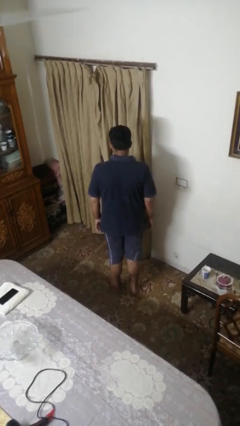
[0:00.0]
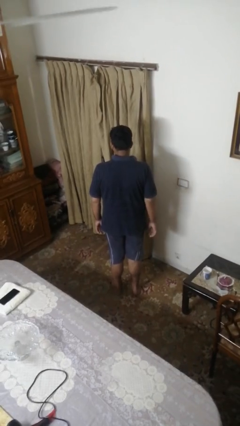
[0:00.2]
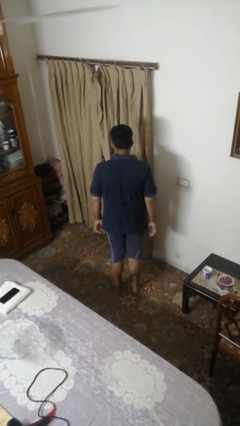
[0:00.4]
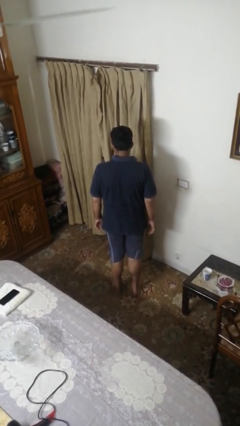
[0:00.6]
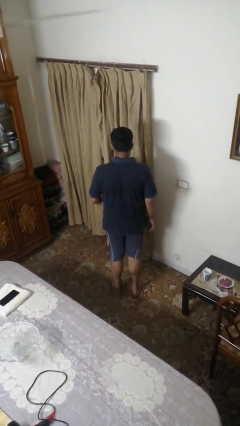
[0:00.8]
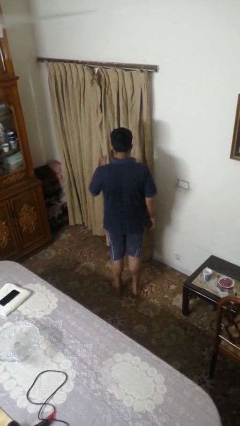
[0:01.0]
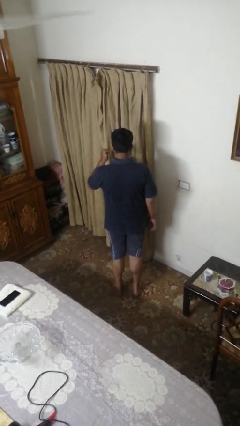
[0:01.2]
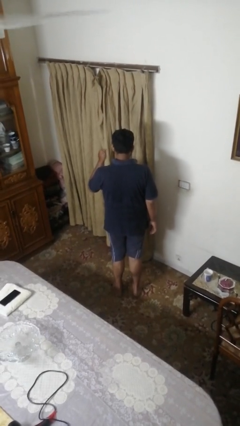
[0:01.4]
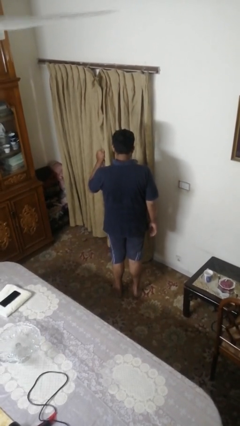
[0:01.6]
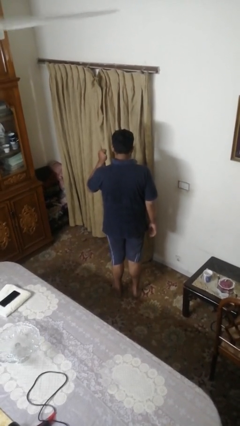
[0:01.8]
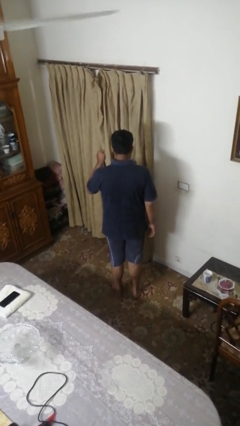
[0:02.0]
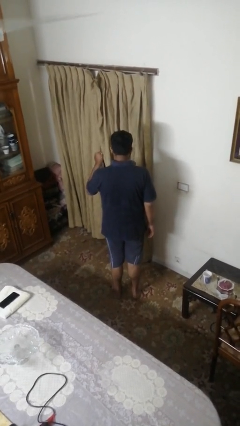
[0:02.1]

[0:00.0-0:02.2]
person gestures behind me

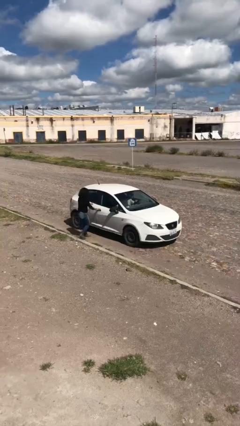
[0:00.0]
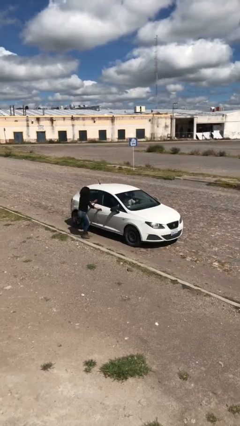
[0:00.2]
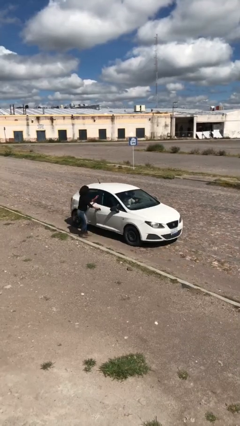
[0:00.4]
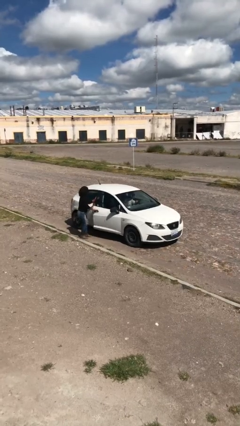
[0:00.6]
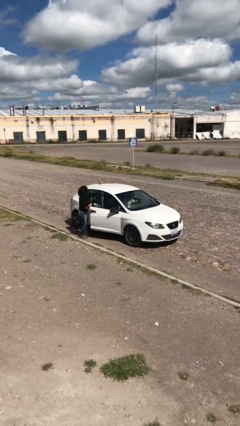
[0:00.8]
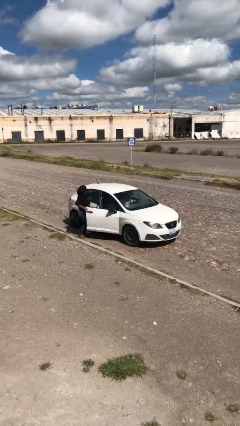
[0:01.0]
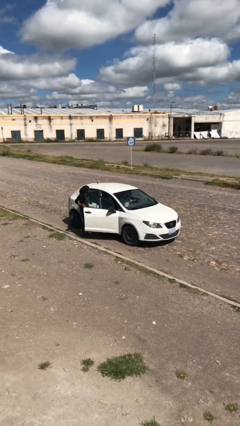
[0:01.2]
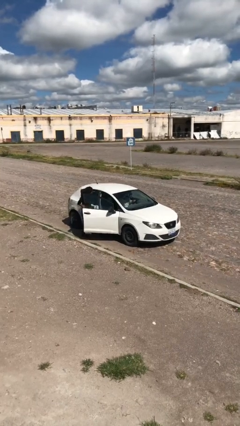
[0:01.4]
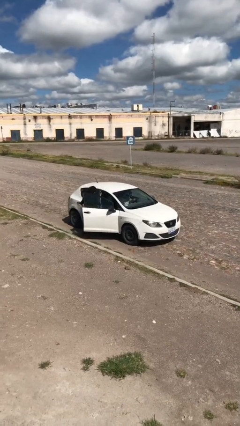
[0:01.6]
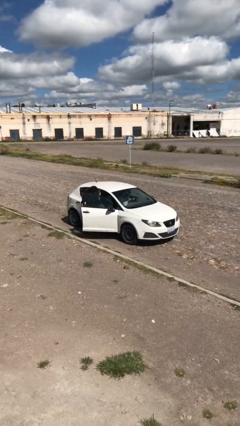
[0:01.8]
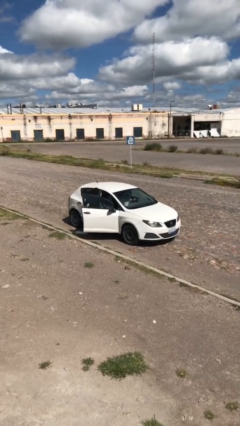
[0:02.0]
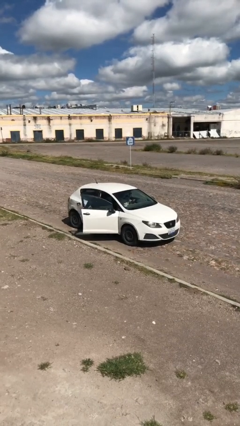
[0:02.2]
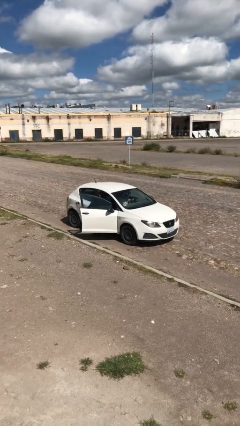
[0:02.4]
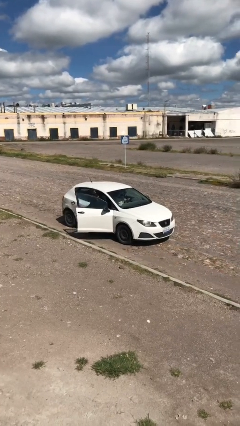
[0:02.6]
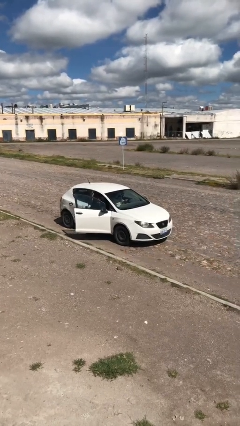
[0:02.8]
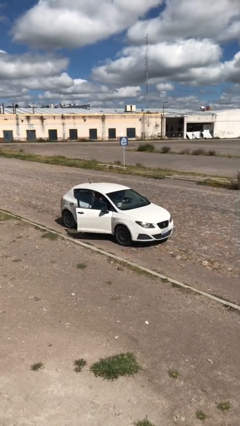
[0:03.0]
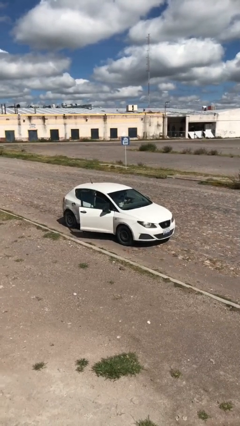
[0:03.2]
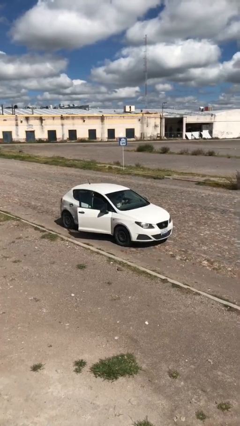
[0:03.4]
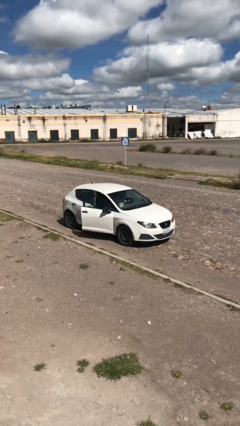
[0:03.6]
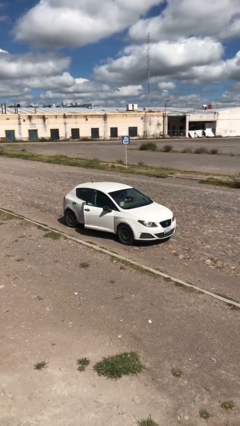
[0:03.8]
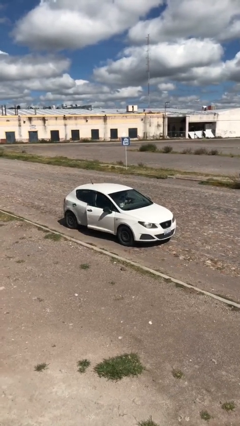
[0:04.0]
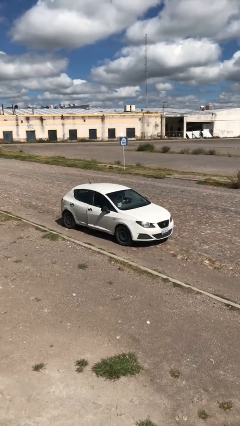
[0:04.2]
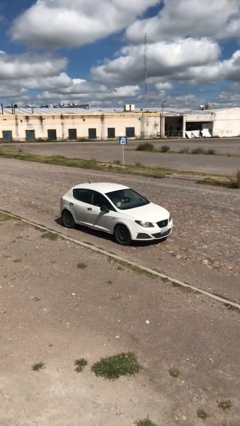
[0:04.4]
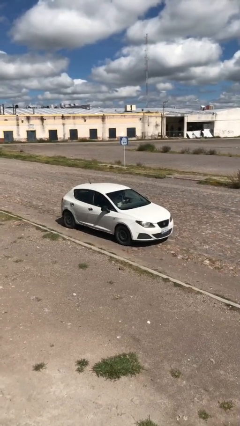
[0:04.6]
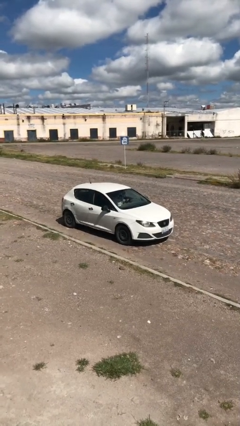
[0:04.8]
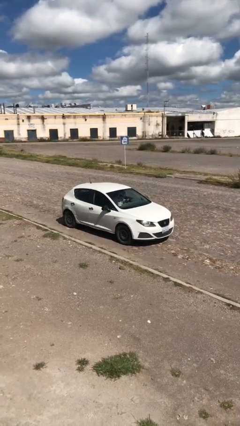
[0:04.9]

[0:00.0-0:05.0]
car picks up person

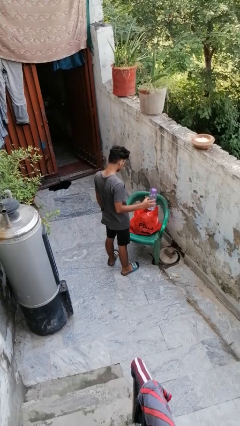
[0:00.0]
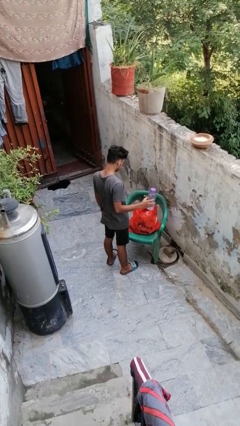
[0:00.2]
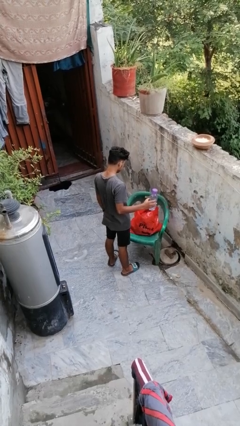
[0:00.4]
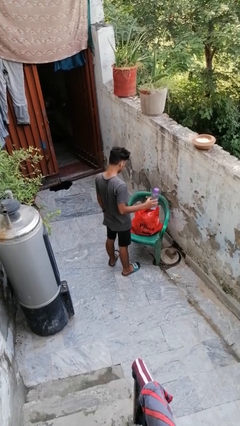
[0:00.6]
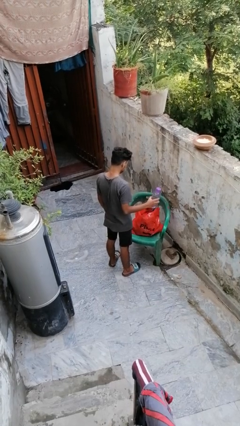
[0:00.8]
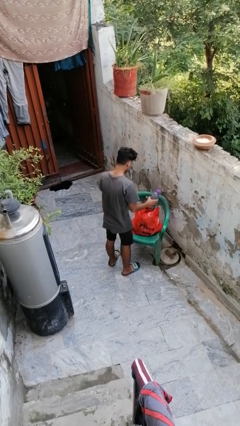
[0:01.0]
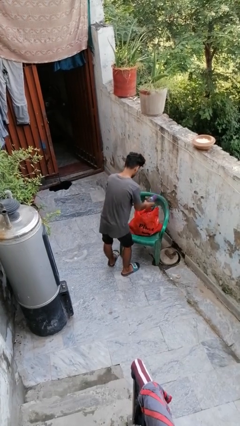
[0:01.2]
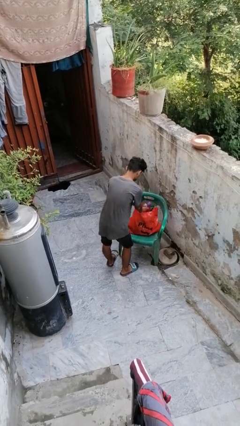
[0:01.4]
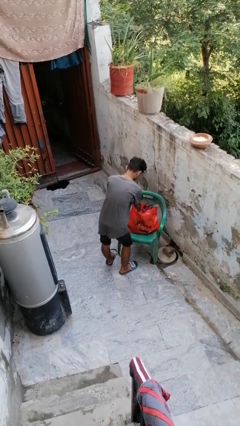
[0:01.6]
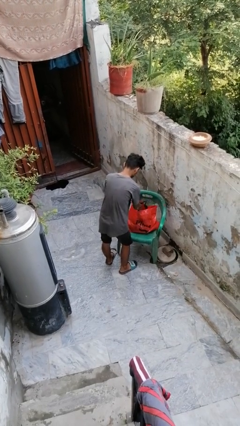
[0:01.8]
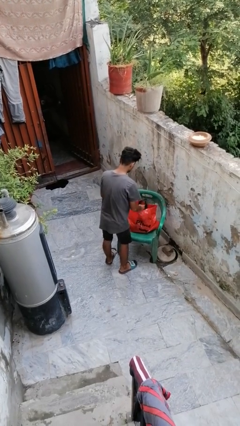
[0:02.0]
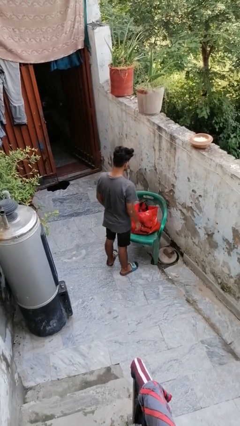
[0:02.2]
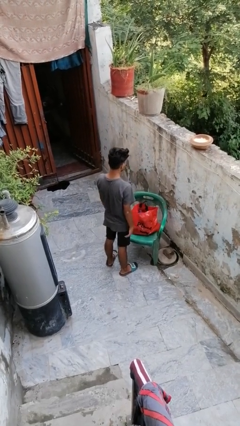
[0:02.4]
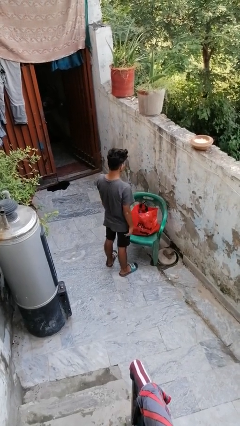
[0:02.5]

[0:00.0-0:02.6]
person puts object into bag

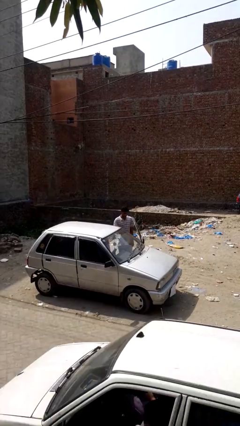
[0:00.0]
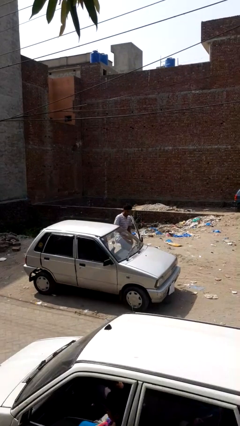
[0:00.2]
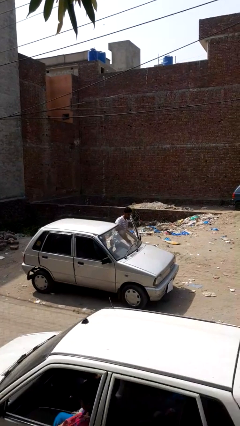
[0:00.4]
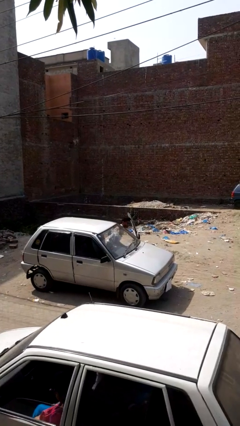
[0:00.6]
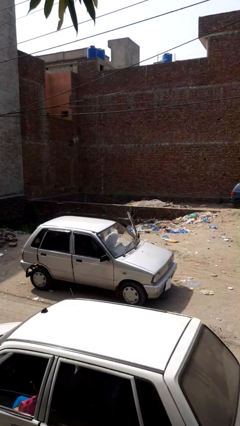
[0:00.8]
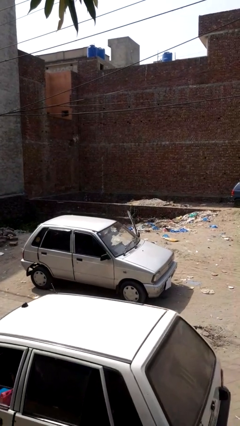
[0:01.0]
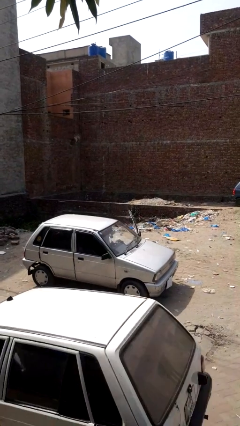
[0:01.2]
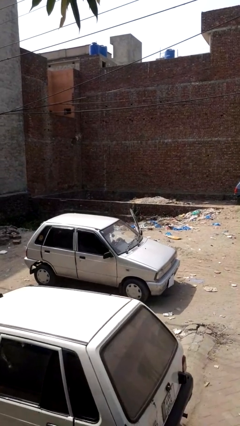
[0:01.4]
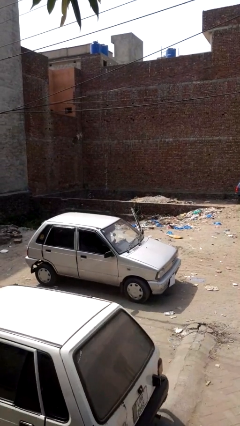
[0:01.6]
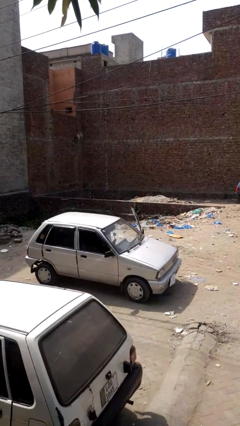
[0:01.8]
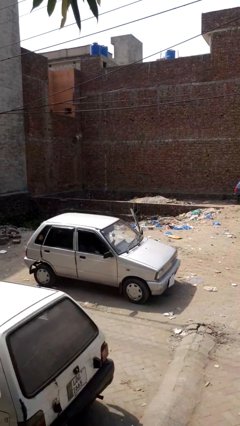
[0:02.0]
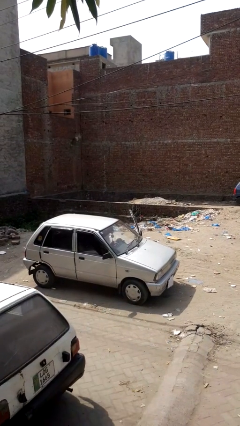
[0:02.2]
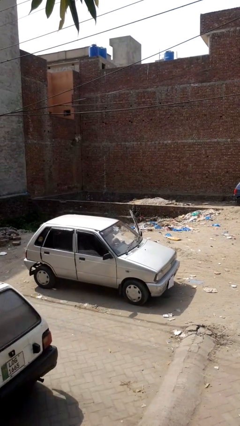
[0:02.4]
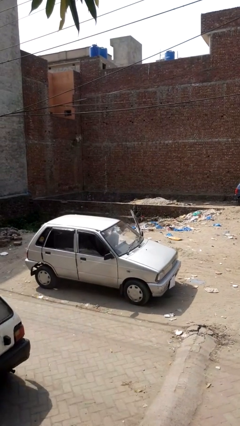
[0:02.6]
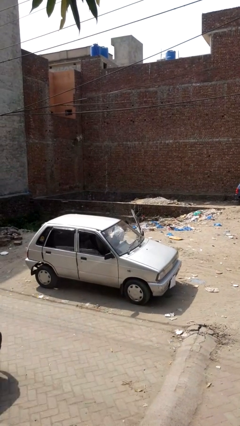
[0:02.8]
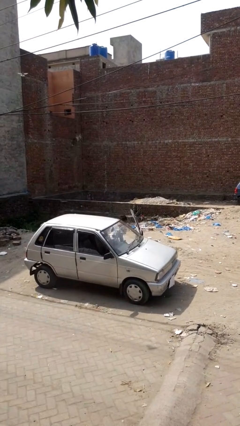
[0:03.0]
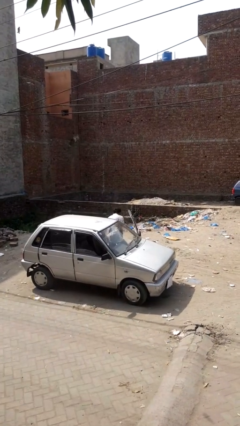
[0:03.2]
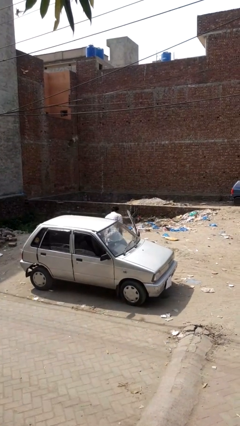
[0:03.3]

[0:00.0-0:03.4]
person enters car

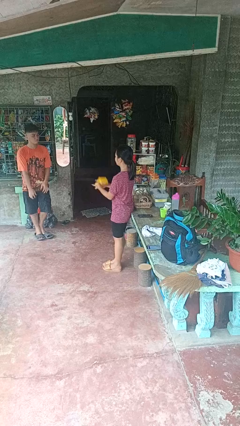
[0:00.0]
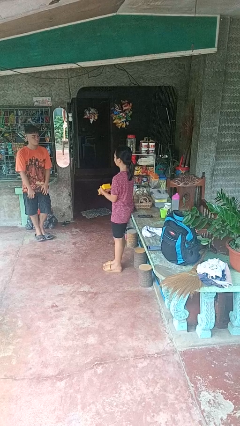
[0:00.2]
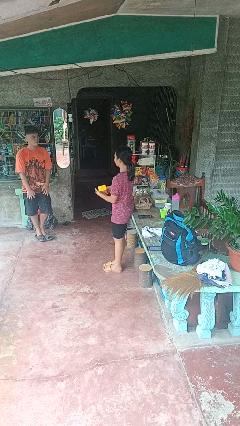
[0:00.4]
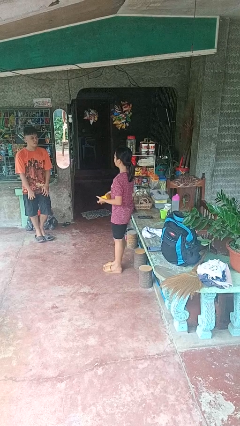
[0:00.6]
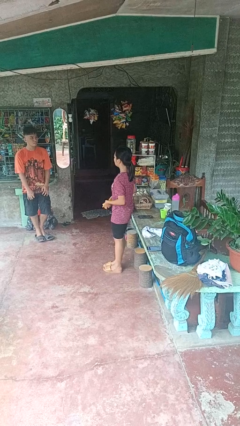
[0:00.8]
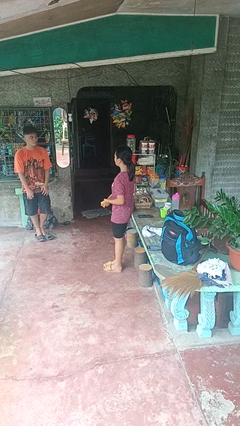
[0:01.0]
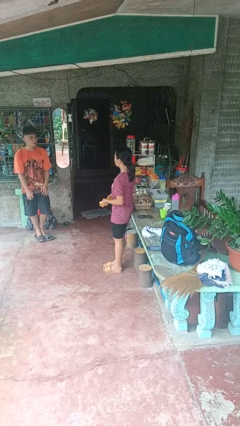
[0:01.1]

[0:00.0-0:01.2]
person catches object from person

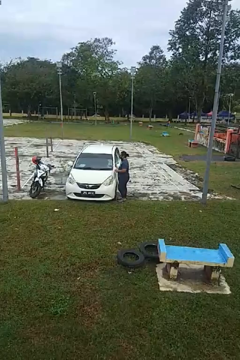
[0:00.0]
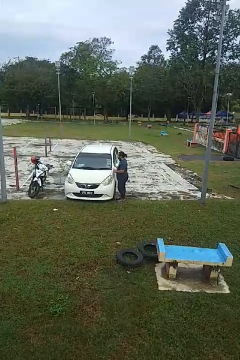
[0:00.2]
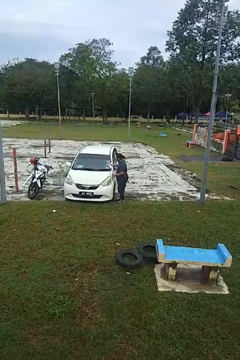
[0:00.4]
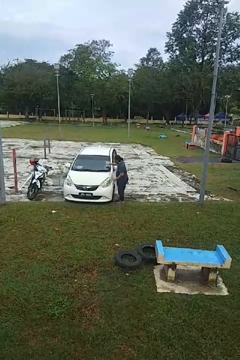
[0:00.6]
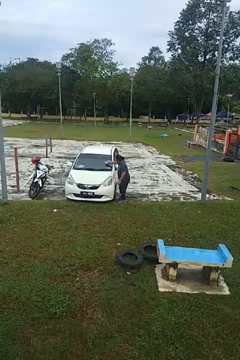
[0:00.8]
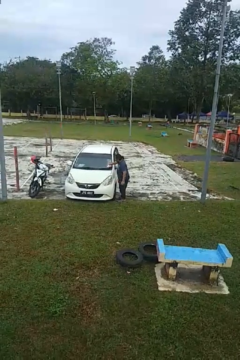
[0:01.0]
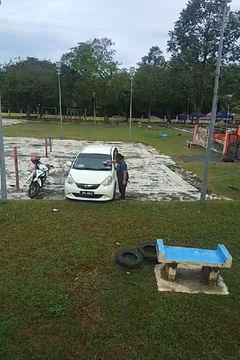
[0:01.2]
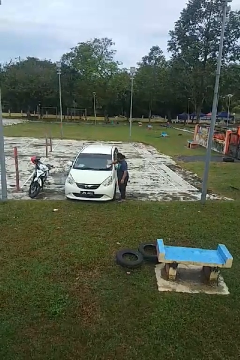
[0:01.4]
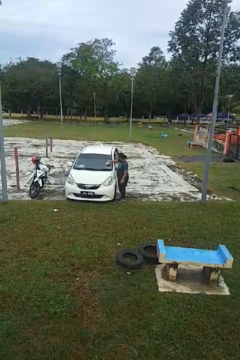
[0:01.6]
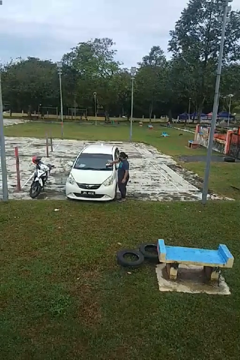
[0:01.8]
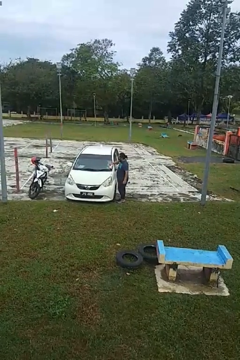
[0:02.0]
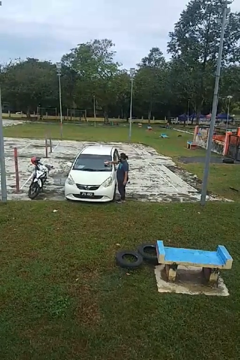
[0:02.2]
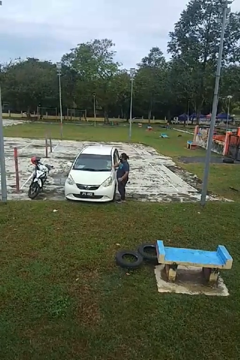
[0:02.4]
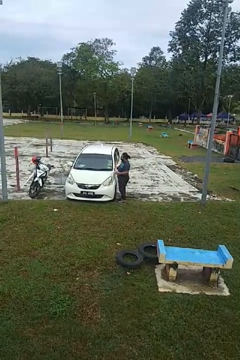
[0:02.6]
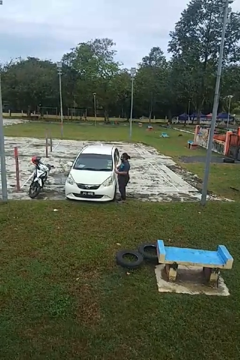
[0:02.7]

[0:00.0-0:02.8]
person polishes car with rag

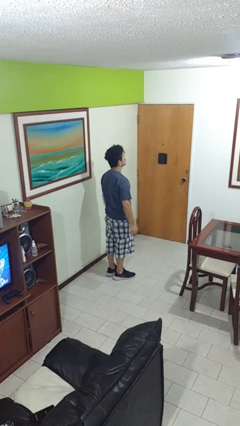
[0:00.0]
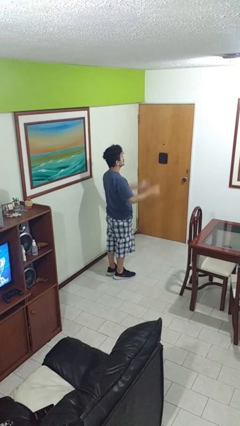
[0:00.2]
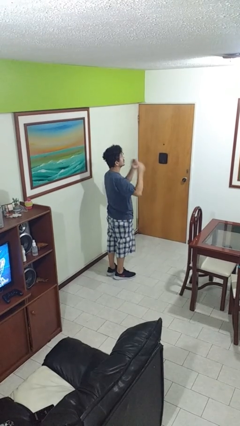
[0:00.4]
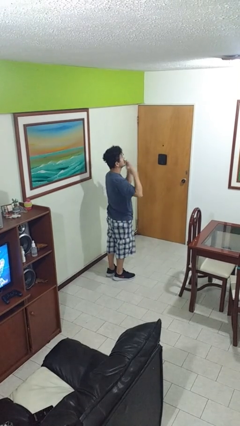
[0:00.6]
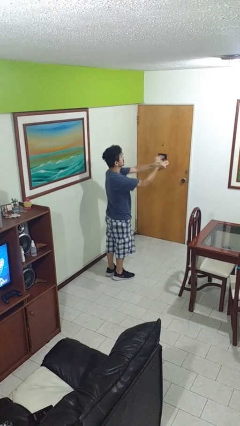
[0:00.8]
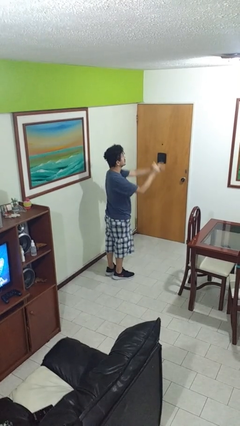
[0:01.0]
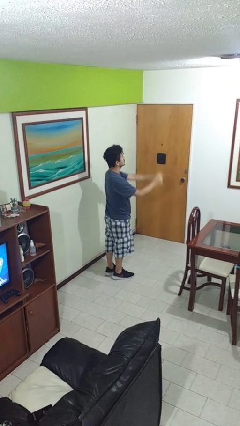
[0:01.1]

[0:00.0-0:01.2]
person snaps fingers
